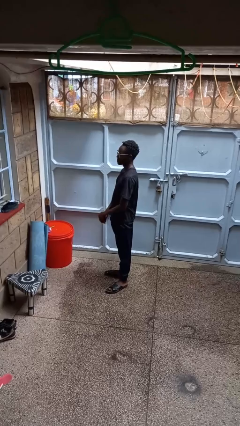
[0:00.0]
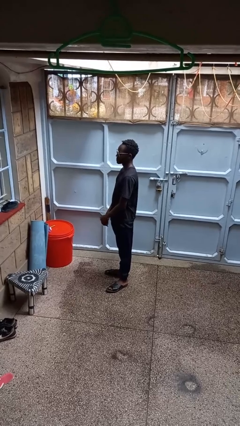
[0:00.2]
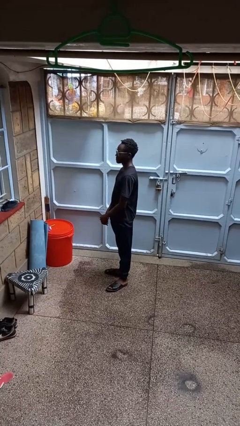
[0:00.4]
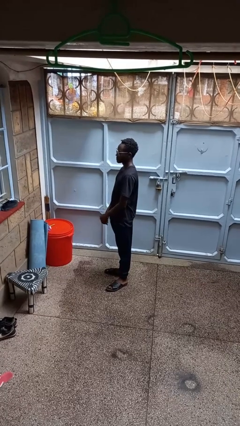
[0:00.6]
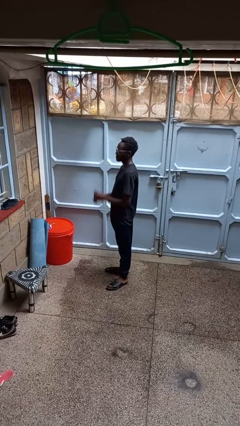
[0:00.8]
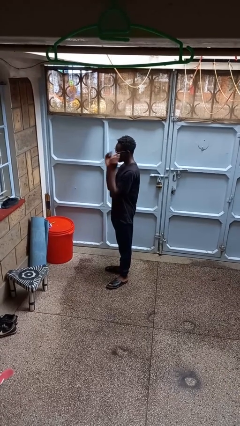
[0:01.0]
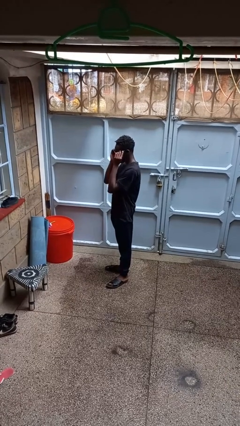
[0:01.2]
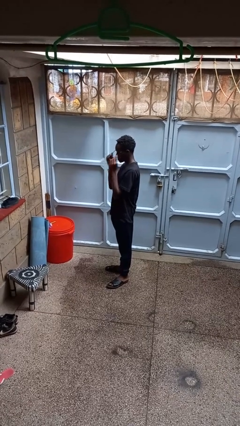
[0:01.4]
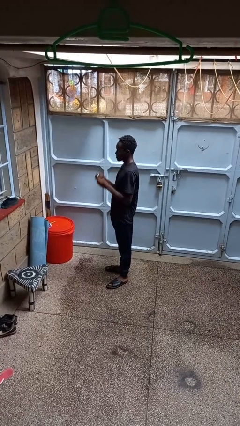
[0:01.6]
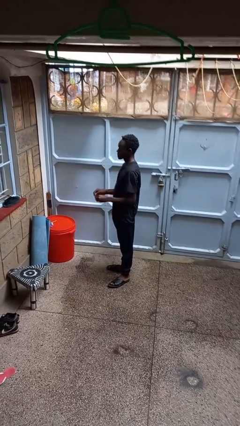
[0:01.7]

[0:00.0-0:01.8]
person takes off glasses

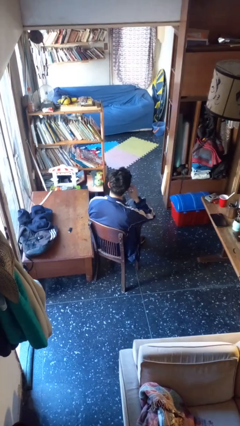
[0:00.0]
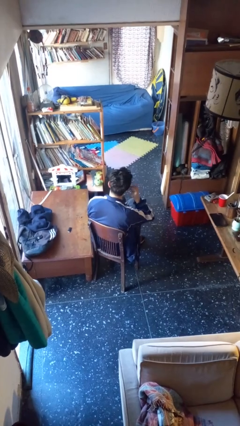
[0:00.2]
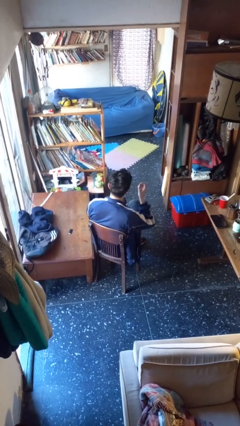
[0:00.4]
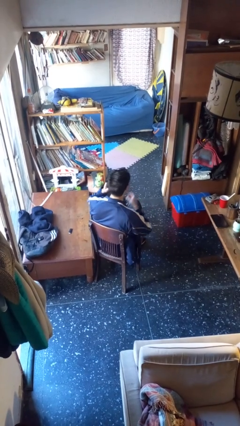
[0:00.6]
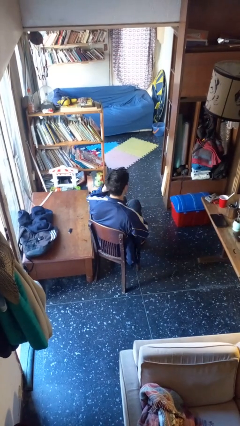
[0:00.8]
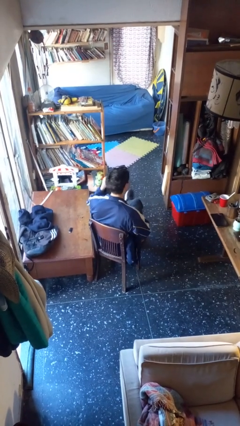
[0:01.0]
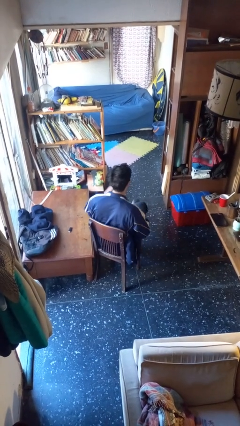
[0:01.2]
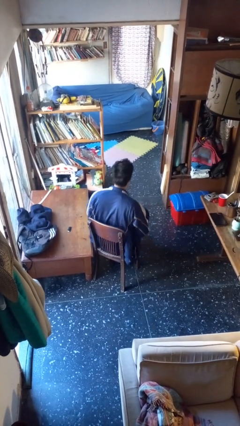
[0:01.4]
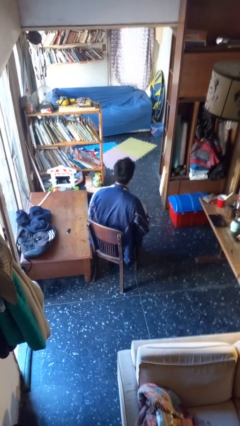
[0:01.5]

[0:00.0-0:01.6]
person takes off headphones

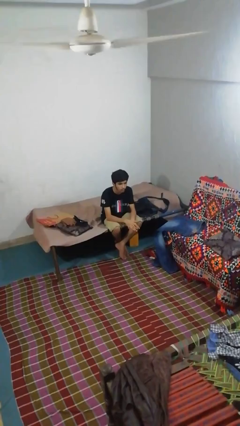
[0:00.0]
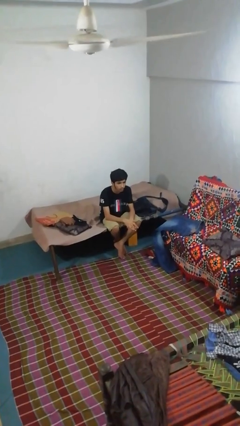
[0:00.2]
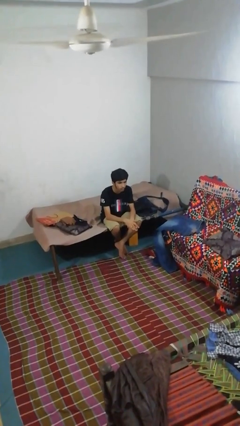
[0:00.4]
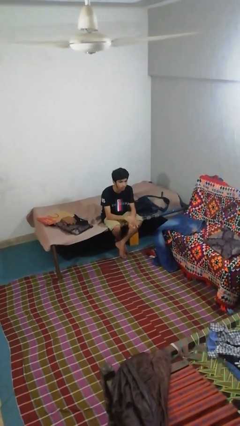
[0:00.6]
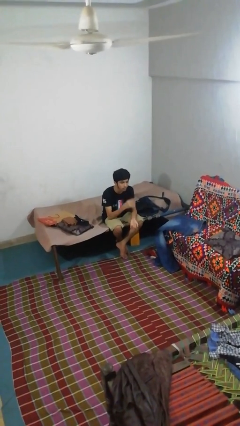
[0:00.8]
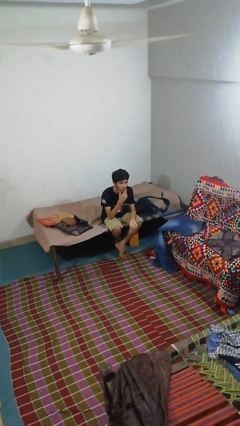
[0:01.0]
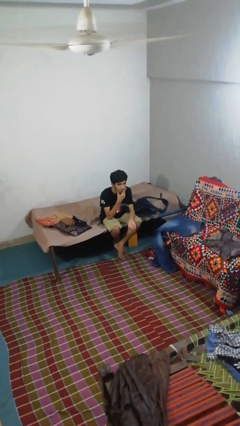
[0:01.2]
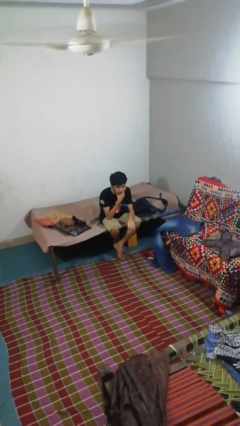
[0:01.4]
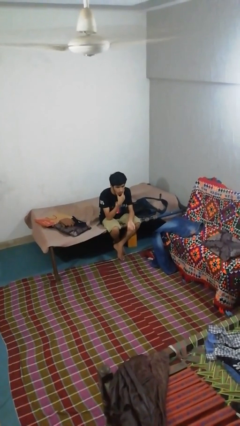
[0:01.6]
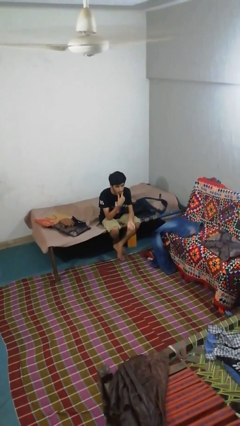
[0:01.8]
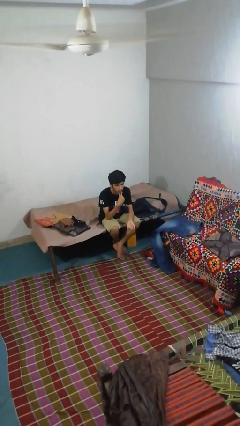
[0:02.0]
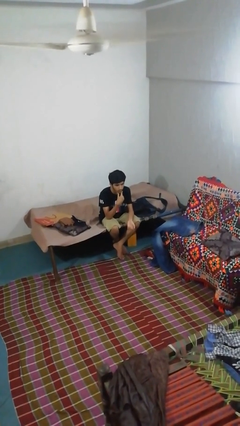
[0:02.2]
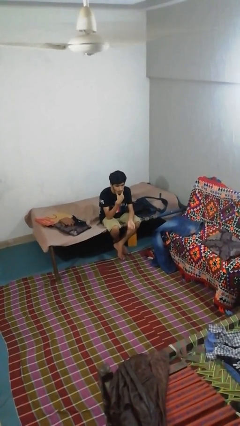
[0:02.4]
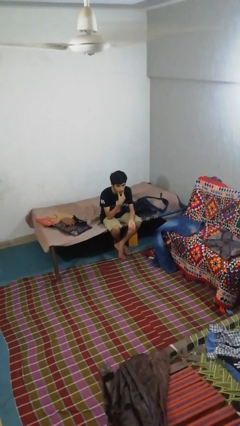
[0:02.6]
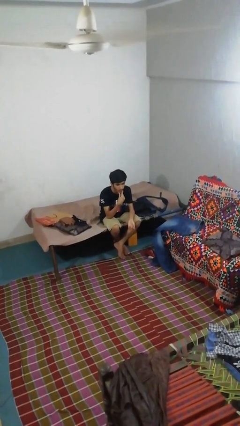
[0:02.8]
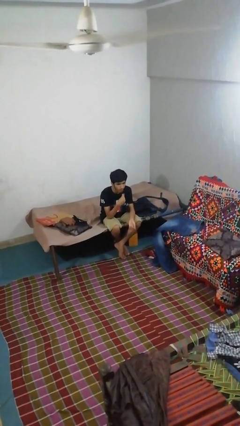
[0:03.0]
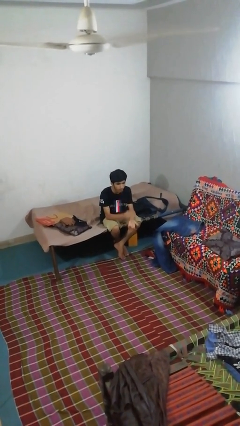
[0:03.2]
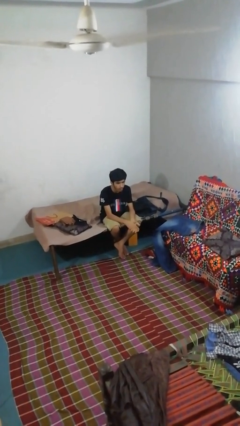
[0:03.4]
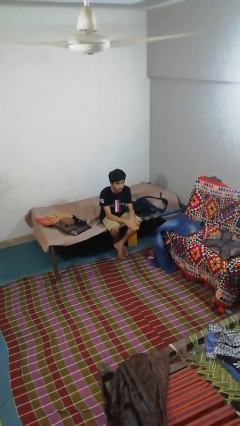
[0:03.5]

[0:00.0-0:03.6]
person strokes chin

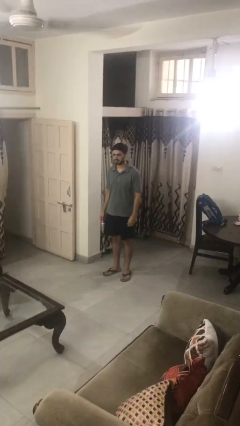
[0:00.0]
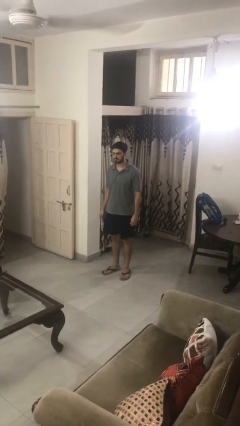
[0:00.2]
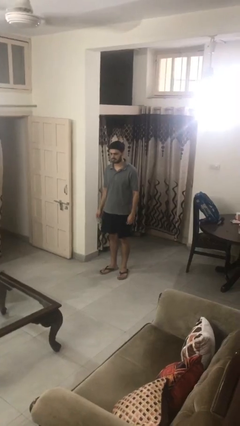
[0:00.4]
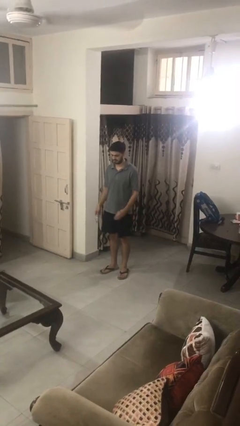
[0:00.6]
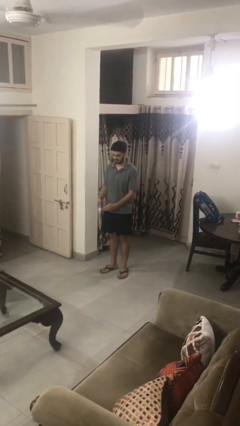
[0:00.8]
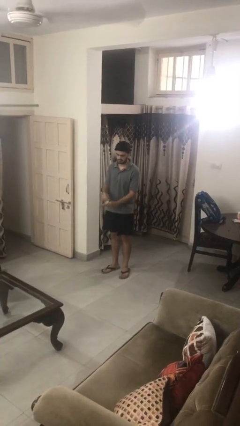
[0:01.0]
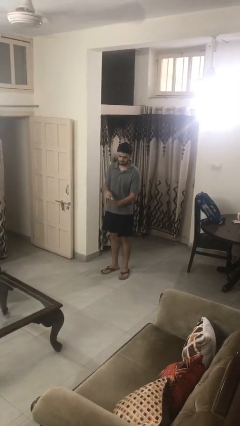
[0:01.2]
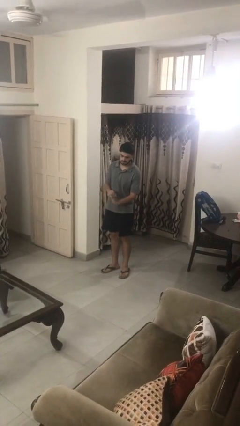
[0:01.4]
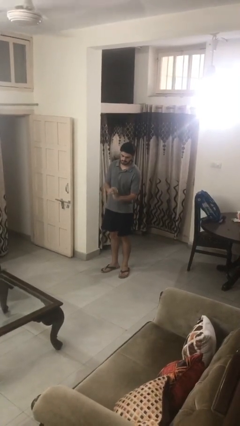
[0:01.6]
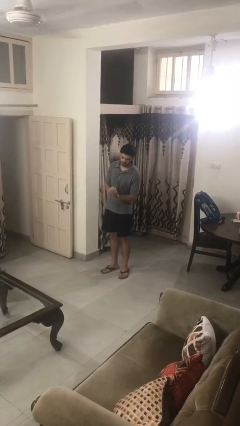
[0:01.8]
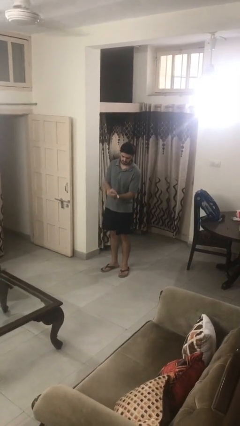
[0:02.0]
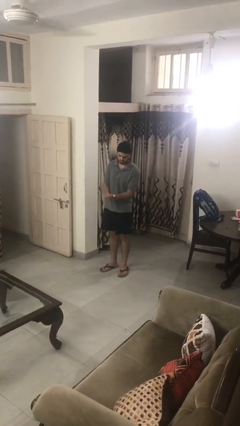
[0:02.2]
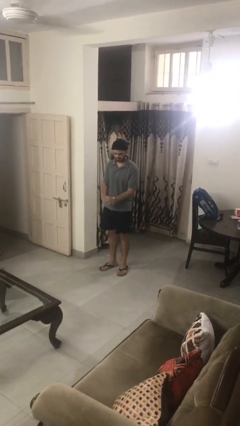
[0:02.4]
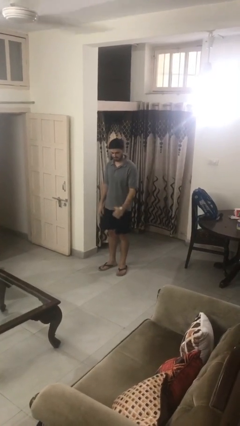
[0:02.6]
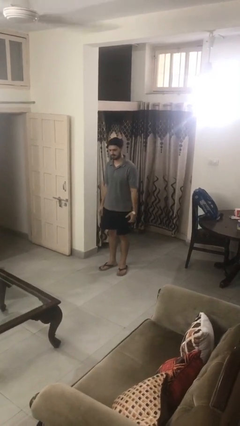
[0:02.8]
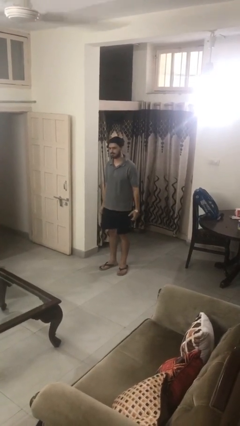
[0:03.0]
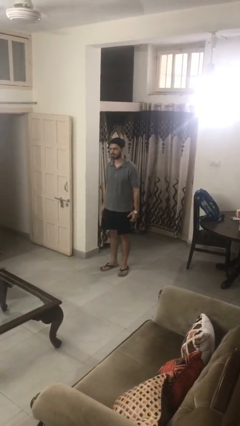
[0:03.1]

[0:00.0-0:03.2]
person puts on wristwatch

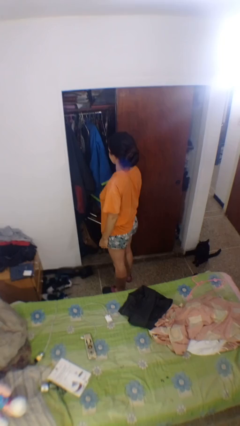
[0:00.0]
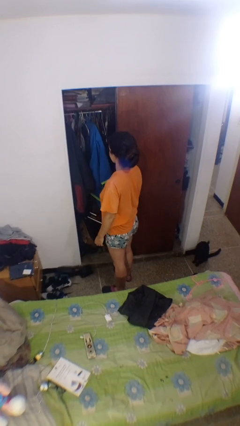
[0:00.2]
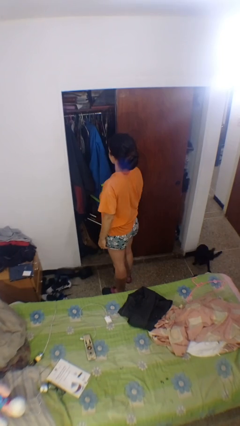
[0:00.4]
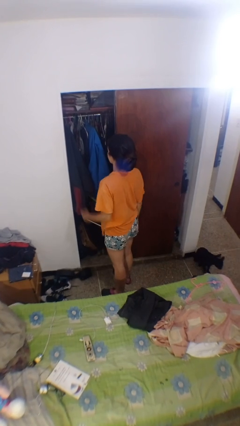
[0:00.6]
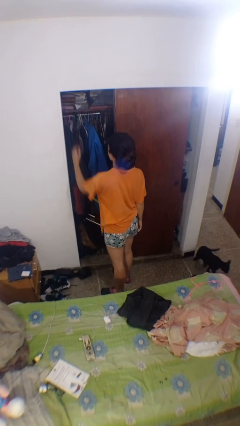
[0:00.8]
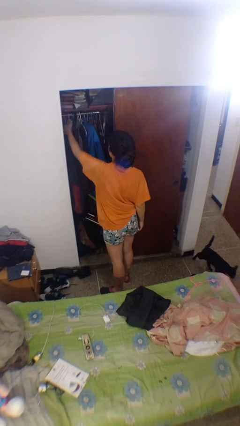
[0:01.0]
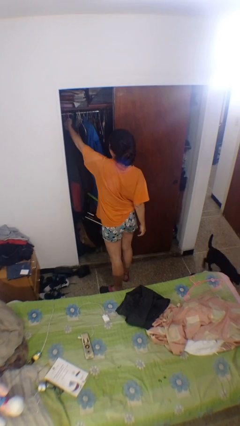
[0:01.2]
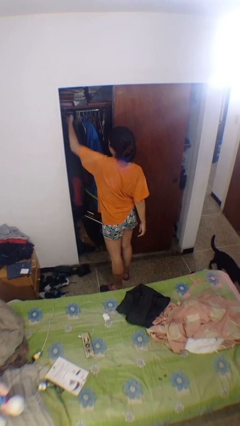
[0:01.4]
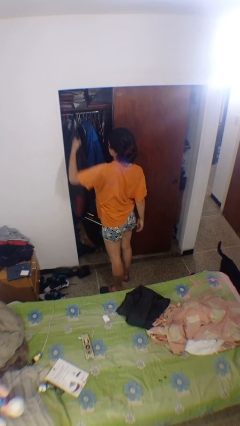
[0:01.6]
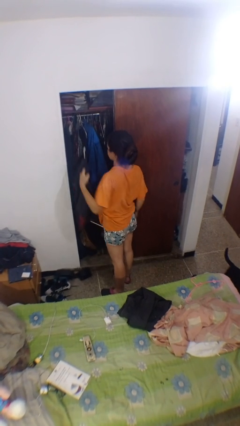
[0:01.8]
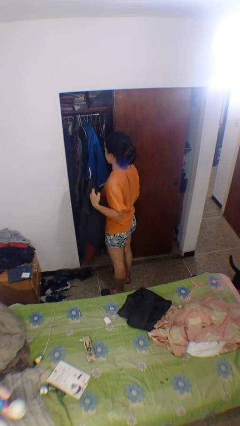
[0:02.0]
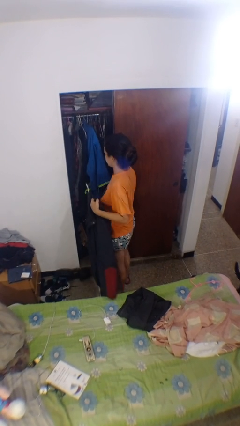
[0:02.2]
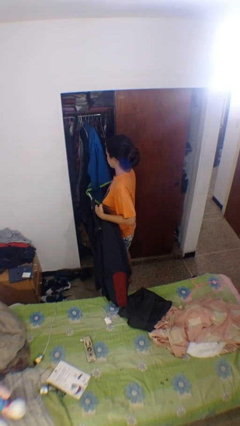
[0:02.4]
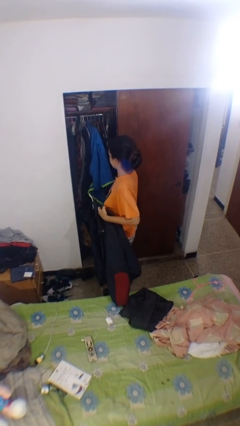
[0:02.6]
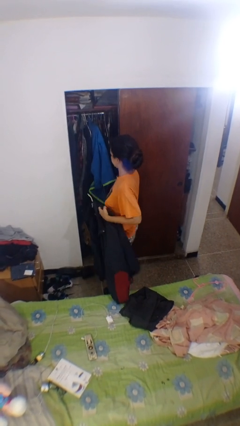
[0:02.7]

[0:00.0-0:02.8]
person takes clothes from closet

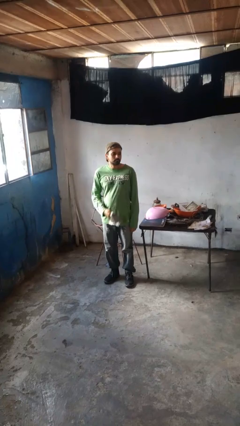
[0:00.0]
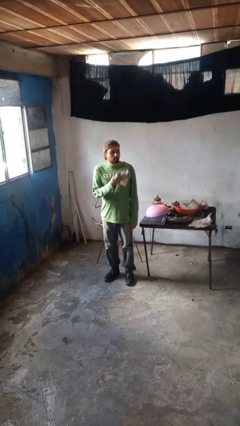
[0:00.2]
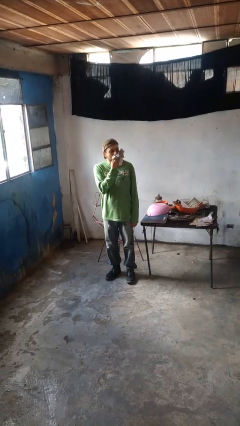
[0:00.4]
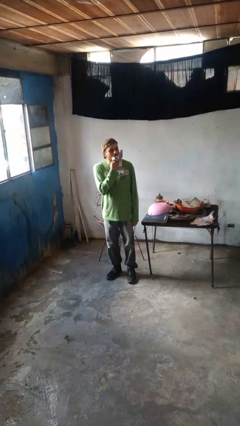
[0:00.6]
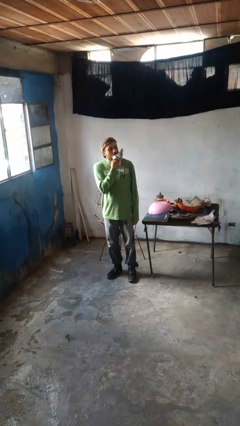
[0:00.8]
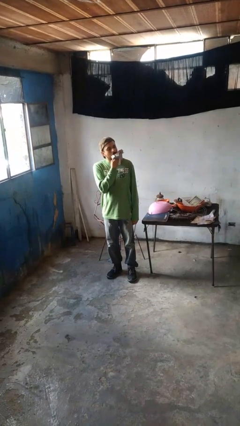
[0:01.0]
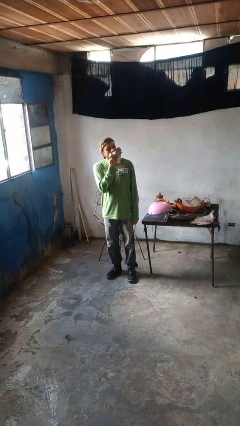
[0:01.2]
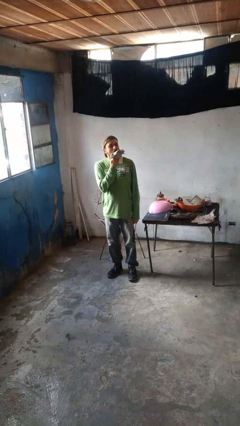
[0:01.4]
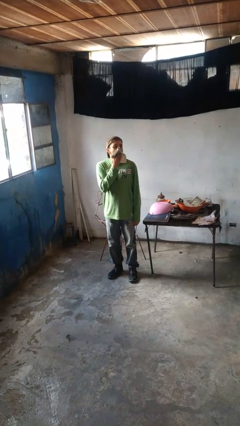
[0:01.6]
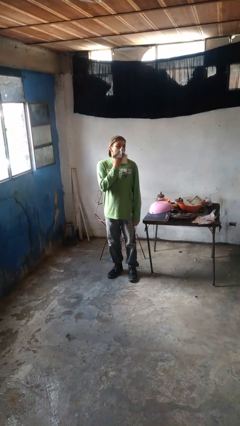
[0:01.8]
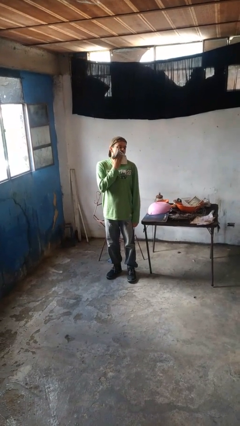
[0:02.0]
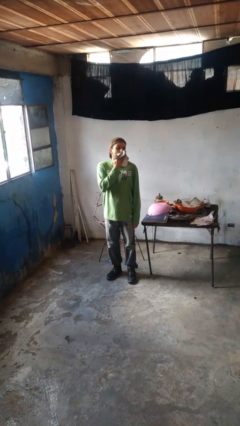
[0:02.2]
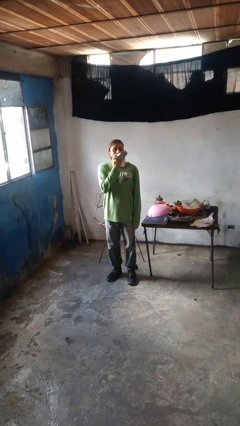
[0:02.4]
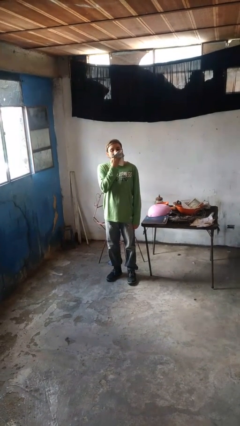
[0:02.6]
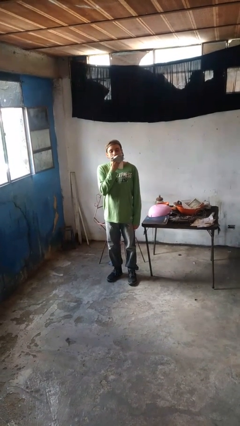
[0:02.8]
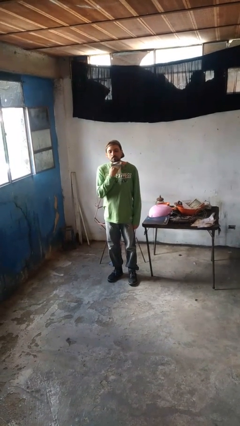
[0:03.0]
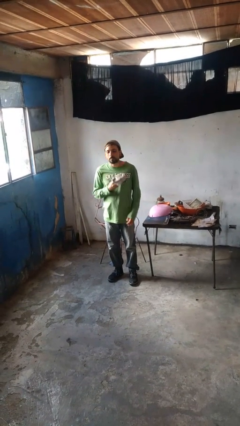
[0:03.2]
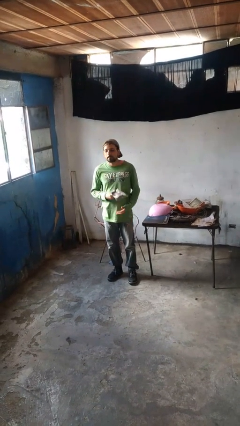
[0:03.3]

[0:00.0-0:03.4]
person wipes mouth with napkin

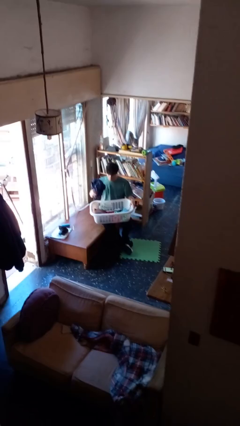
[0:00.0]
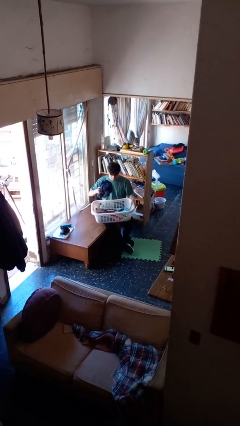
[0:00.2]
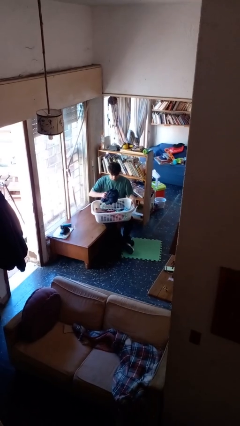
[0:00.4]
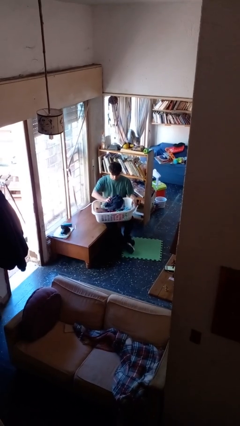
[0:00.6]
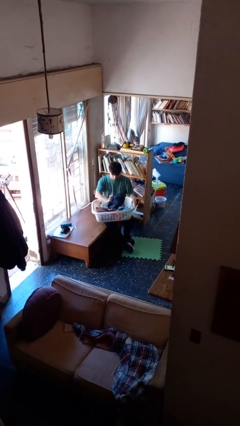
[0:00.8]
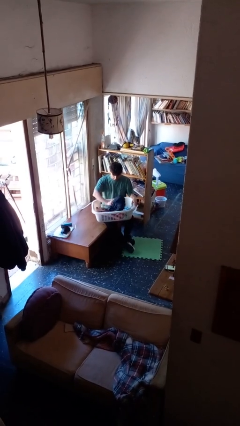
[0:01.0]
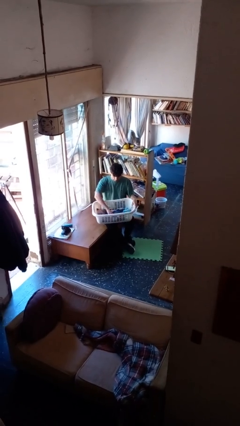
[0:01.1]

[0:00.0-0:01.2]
person puts object into basket
